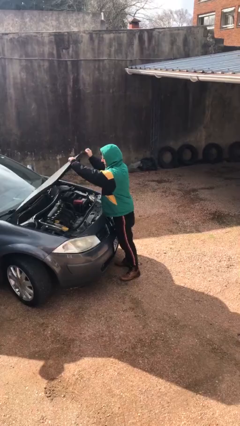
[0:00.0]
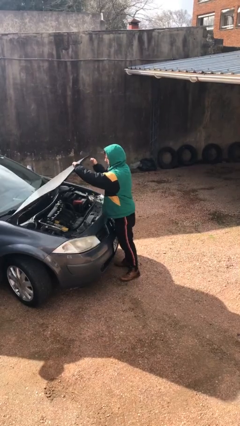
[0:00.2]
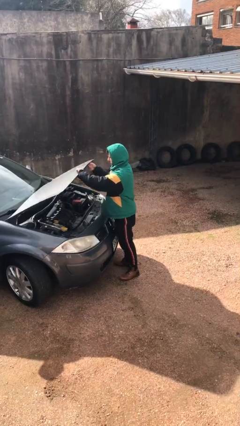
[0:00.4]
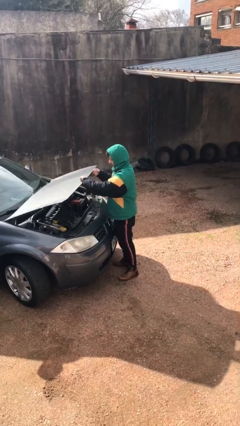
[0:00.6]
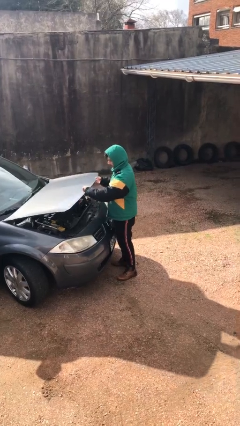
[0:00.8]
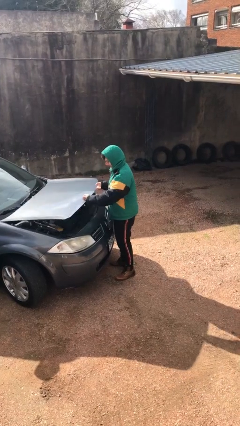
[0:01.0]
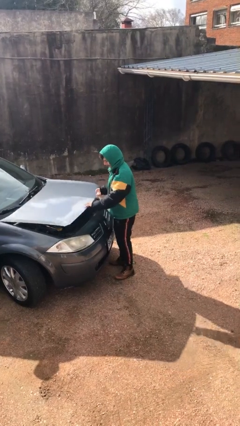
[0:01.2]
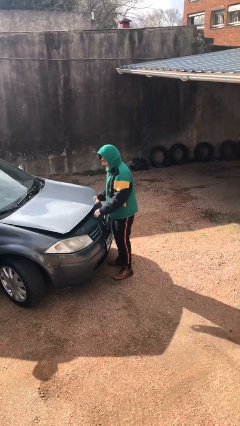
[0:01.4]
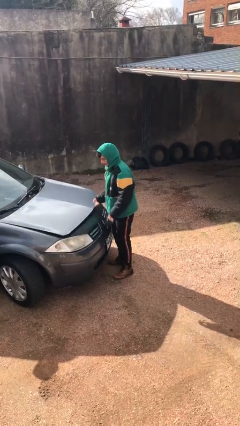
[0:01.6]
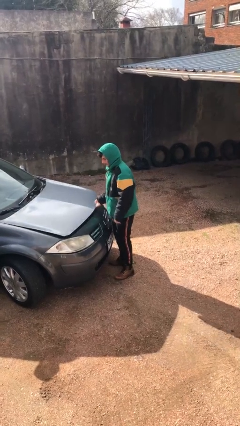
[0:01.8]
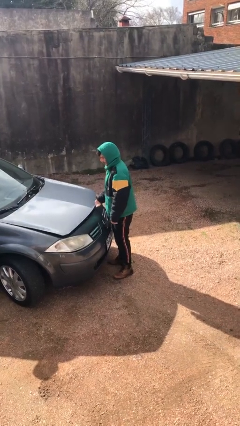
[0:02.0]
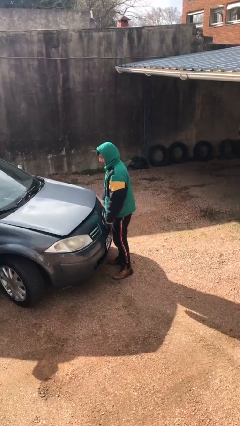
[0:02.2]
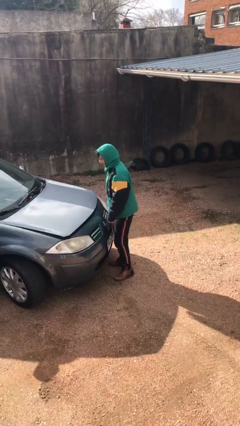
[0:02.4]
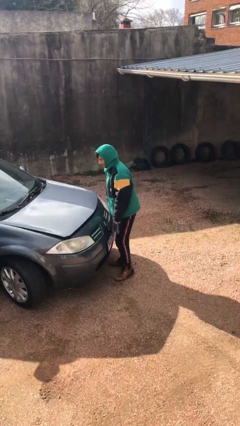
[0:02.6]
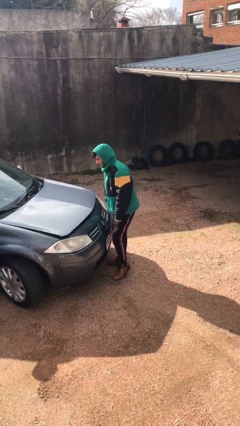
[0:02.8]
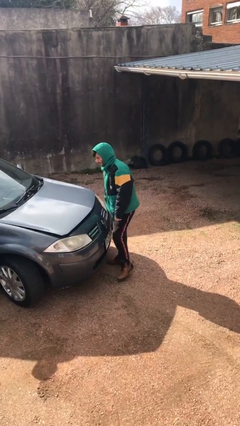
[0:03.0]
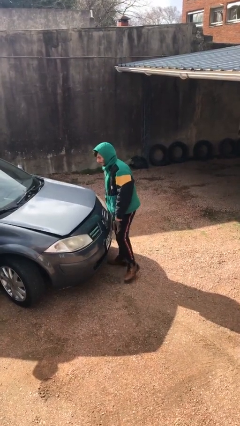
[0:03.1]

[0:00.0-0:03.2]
person closes car hood

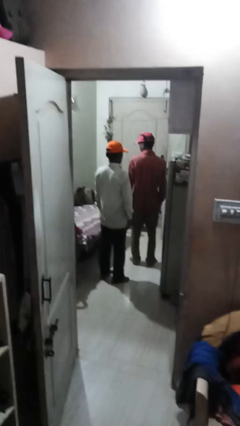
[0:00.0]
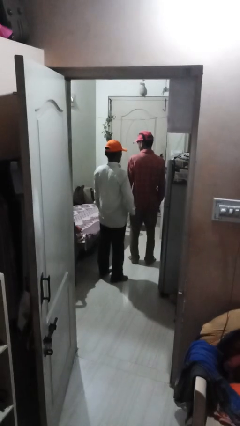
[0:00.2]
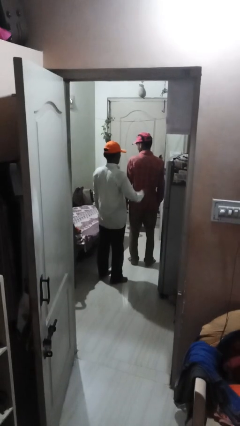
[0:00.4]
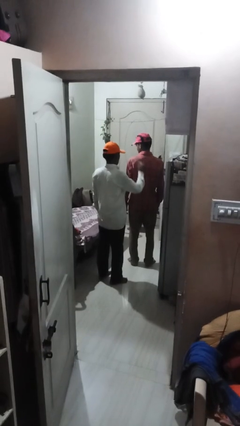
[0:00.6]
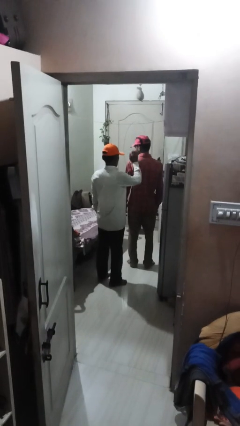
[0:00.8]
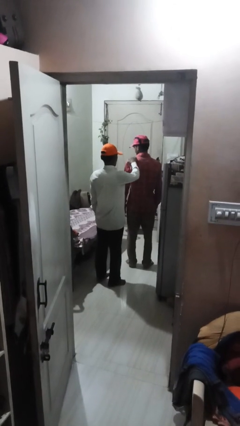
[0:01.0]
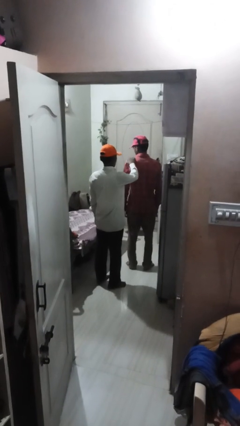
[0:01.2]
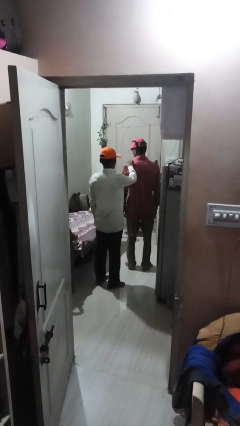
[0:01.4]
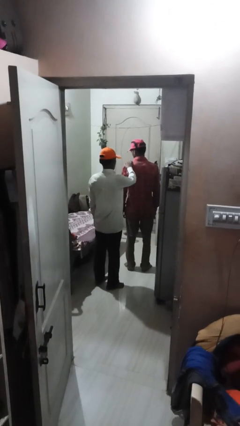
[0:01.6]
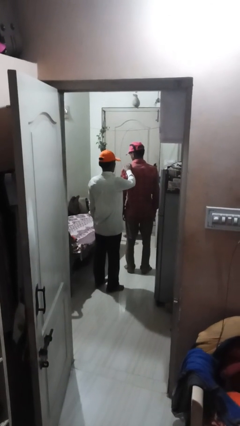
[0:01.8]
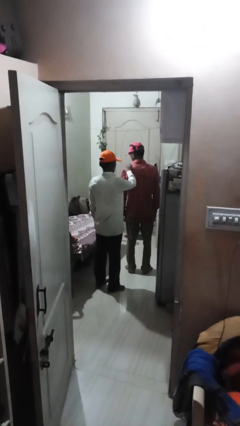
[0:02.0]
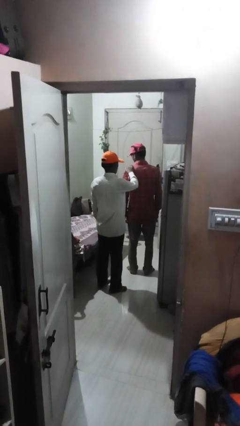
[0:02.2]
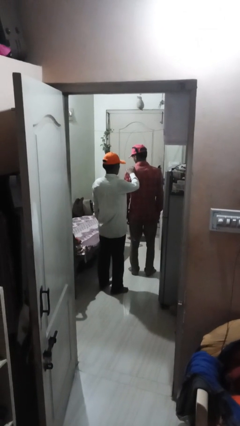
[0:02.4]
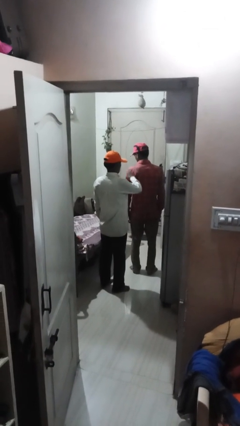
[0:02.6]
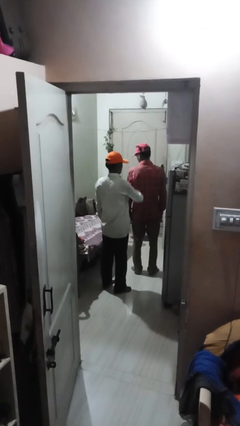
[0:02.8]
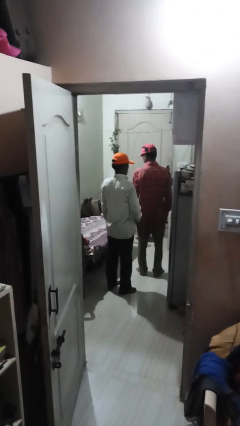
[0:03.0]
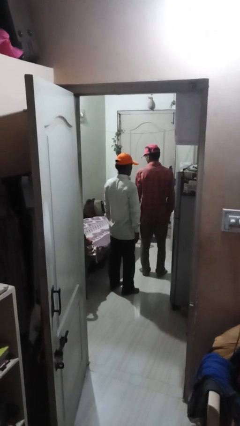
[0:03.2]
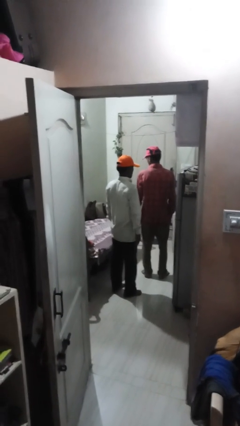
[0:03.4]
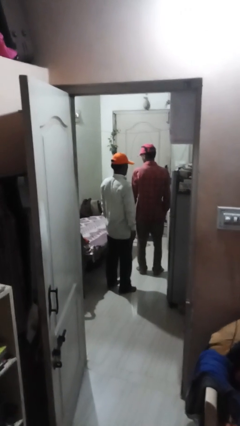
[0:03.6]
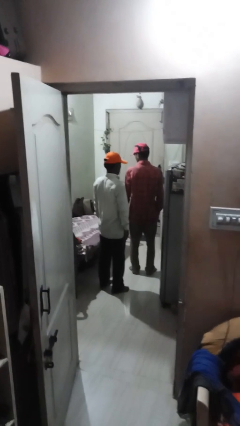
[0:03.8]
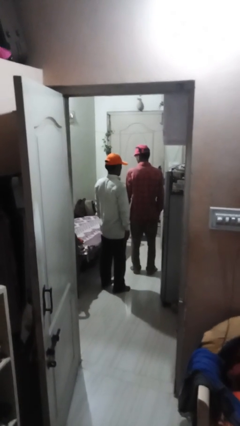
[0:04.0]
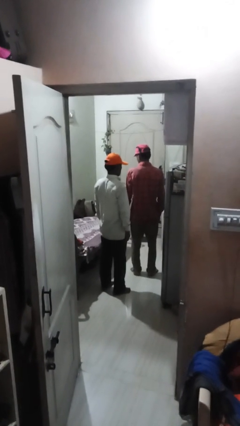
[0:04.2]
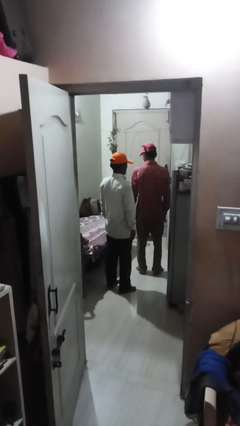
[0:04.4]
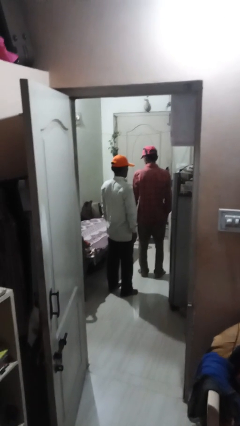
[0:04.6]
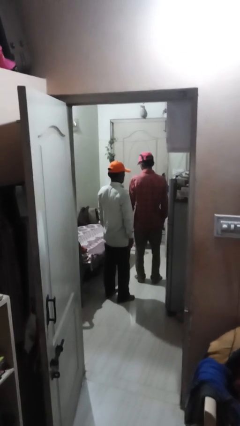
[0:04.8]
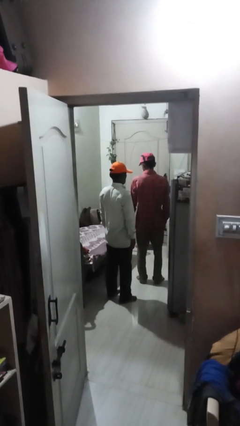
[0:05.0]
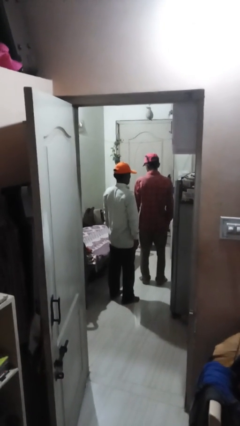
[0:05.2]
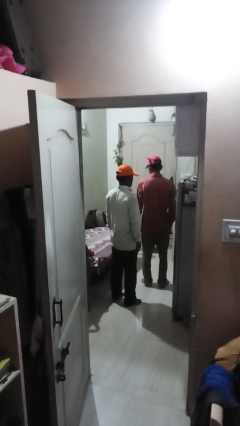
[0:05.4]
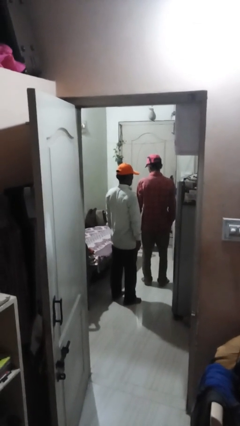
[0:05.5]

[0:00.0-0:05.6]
person touches back of person

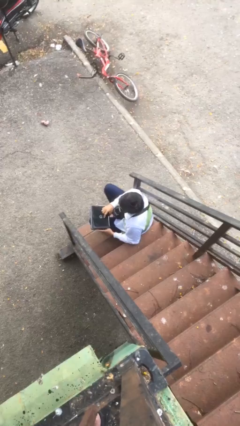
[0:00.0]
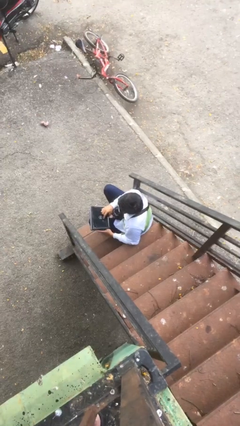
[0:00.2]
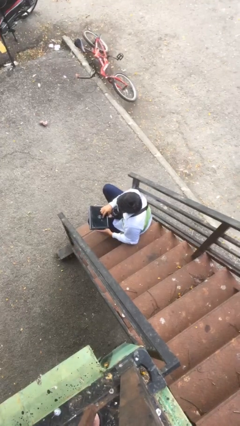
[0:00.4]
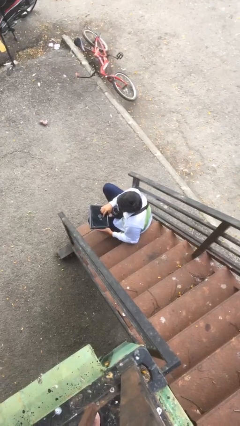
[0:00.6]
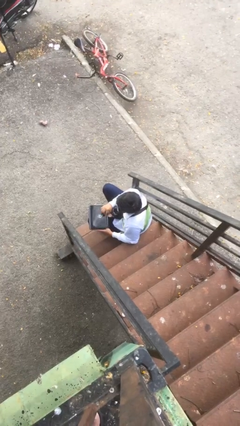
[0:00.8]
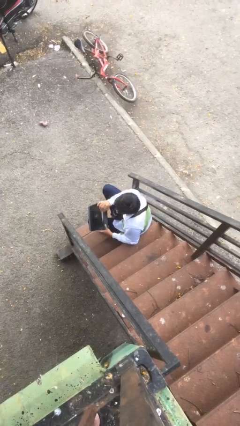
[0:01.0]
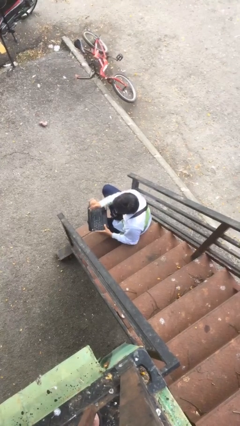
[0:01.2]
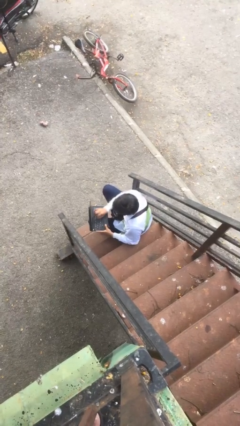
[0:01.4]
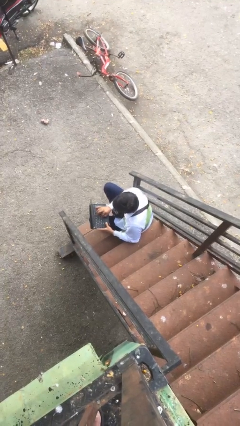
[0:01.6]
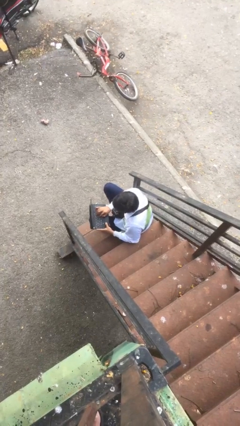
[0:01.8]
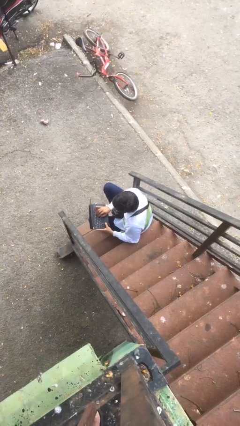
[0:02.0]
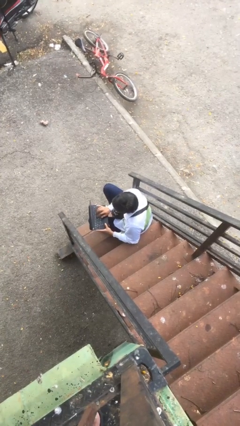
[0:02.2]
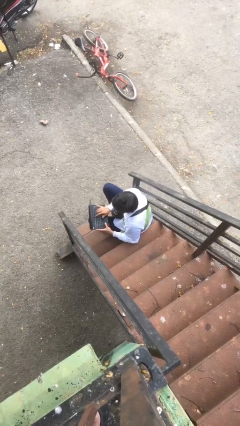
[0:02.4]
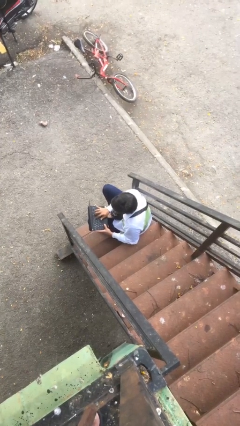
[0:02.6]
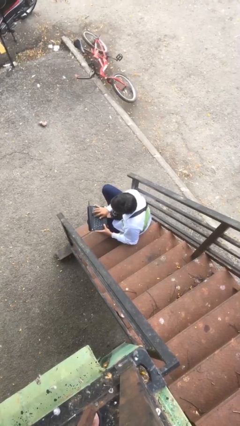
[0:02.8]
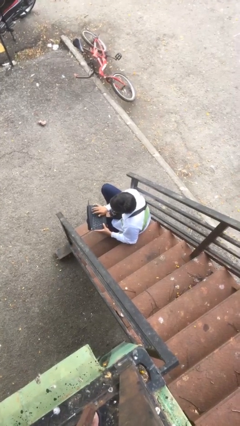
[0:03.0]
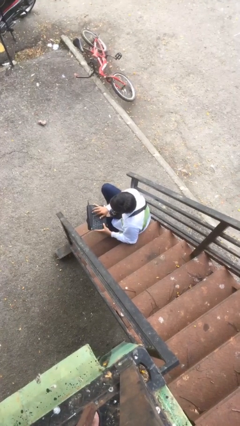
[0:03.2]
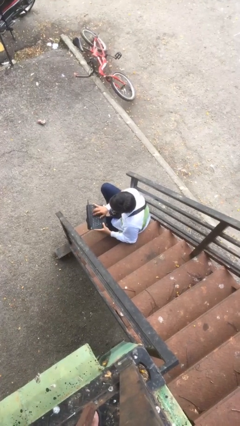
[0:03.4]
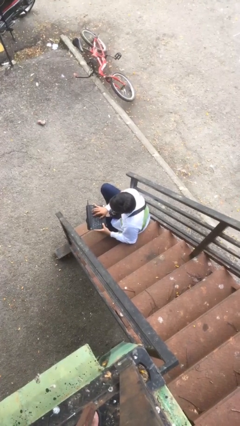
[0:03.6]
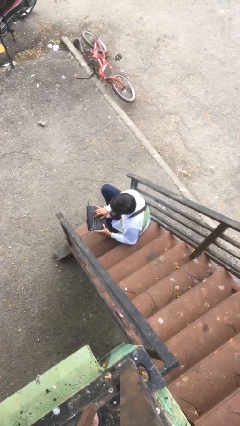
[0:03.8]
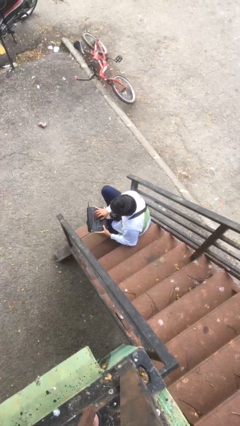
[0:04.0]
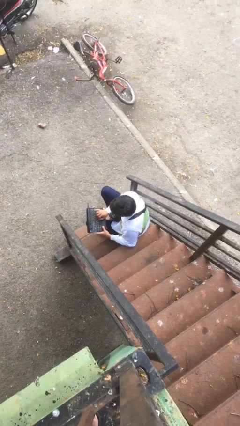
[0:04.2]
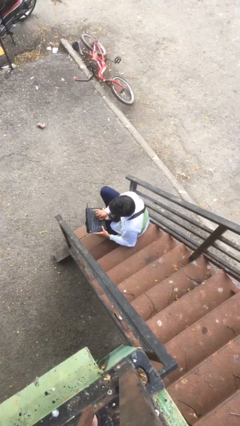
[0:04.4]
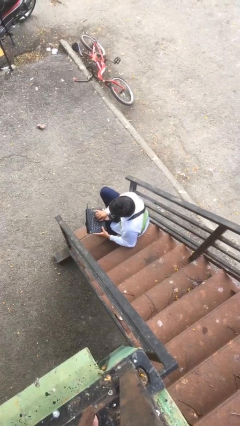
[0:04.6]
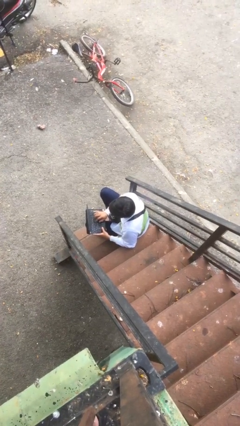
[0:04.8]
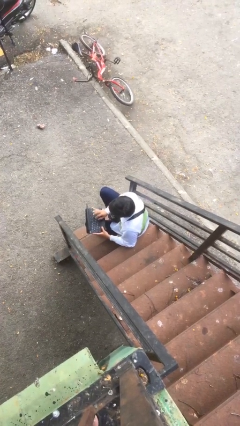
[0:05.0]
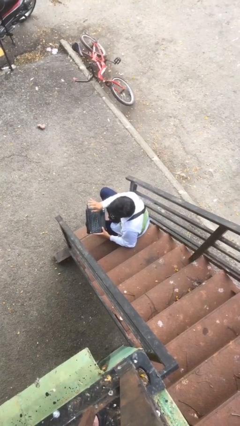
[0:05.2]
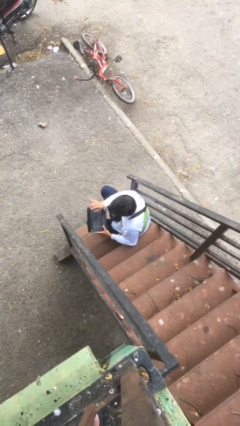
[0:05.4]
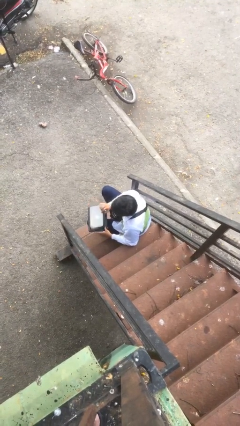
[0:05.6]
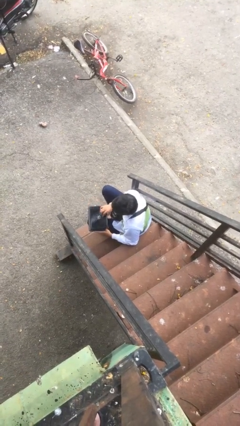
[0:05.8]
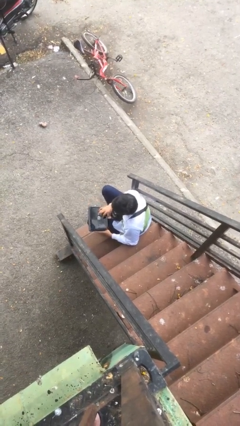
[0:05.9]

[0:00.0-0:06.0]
person interacts with laptop

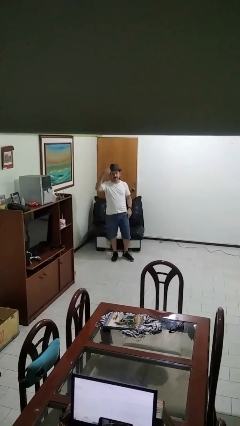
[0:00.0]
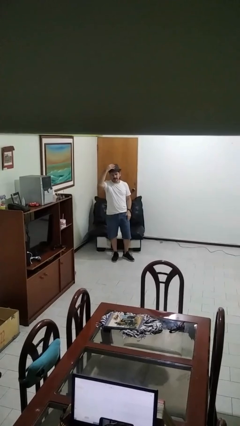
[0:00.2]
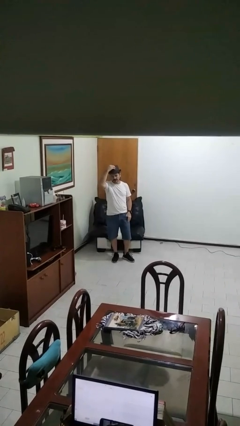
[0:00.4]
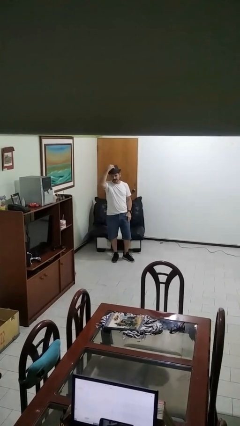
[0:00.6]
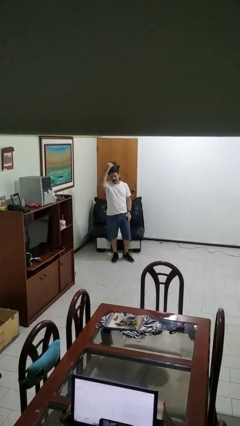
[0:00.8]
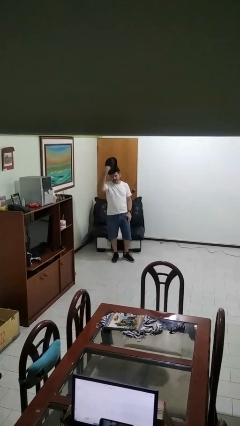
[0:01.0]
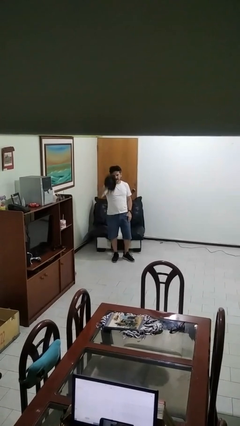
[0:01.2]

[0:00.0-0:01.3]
person takes off hat

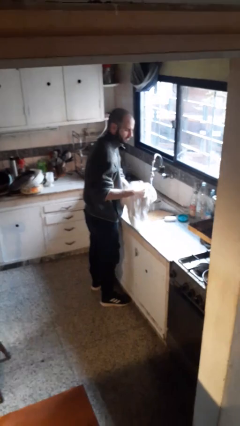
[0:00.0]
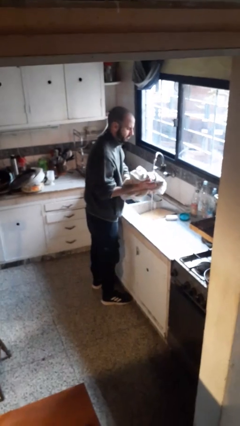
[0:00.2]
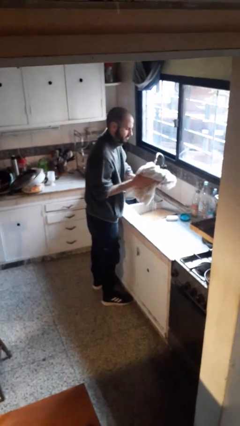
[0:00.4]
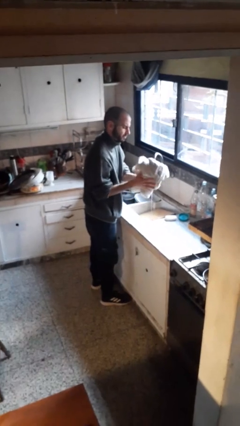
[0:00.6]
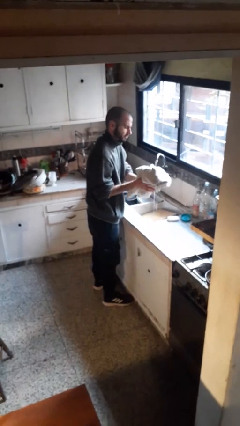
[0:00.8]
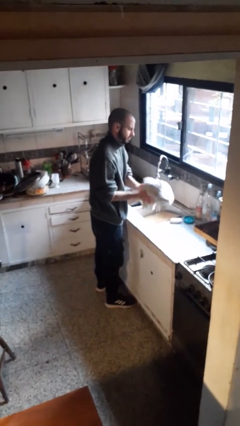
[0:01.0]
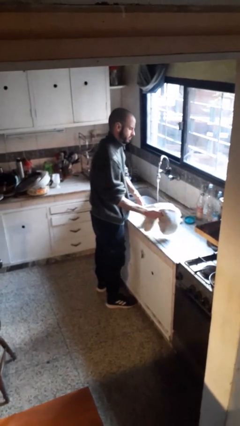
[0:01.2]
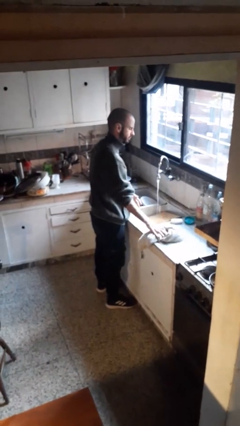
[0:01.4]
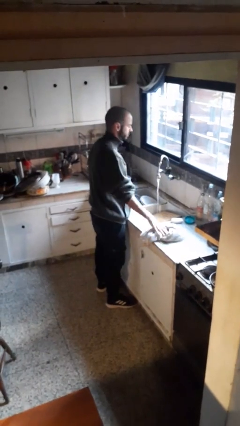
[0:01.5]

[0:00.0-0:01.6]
person dries hands with towel

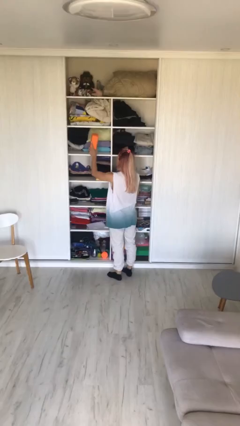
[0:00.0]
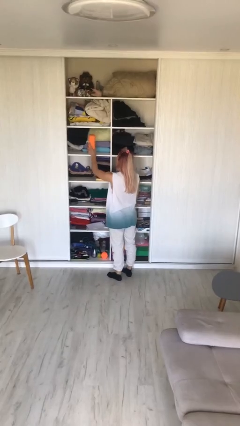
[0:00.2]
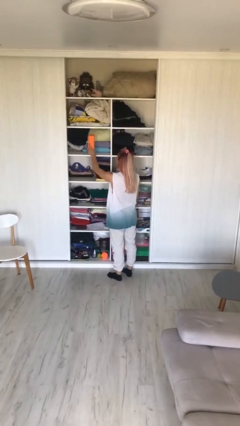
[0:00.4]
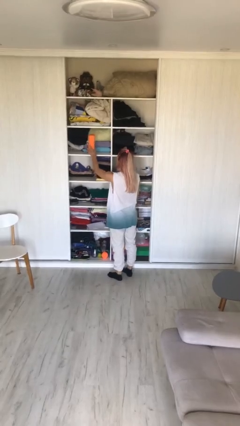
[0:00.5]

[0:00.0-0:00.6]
person puts down object on shelf
